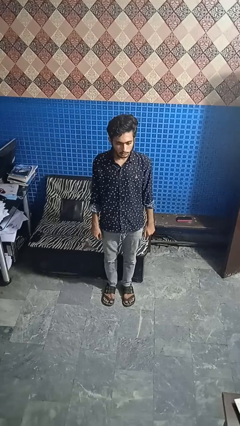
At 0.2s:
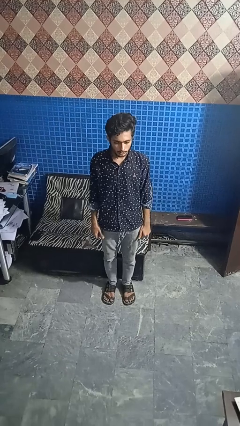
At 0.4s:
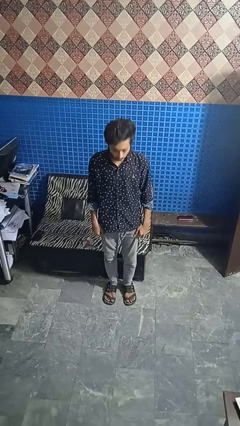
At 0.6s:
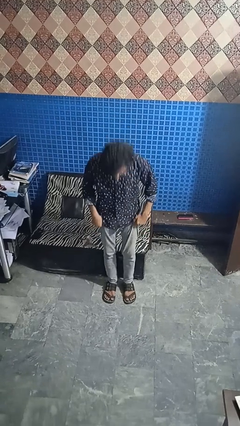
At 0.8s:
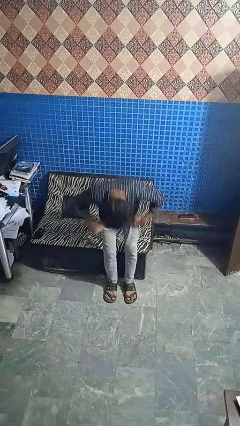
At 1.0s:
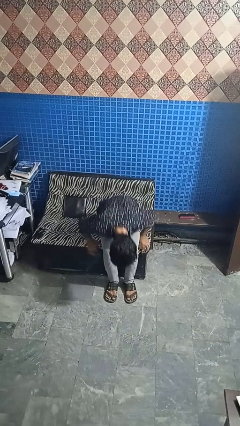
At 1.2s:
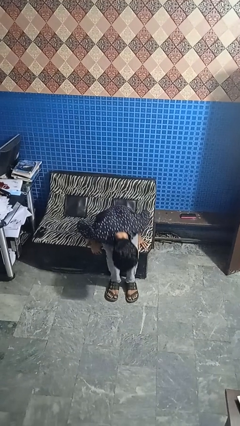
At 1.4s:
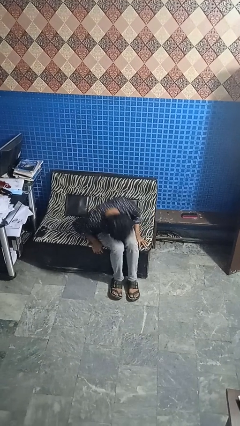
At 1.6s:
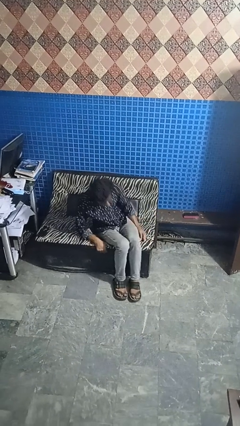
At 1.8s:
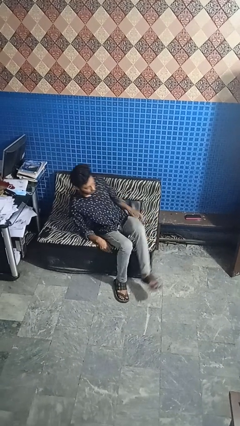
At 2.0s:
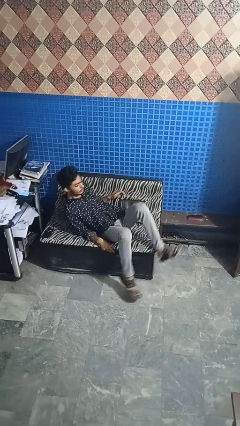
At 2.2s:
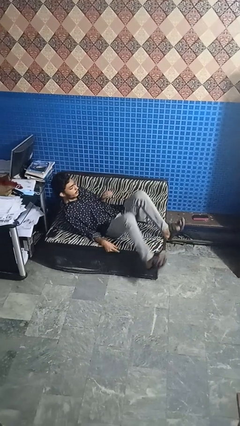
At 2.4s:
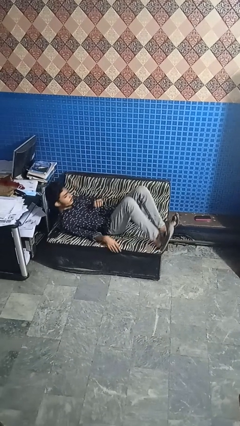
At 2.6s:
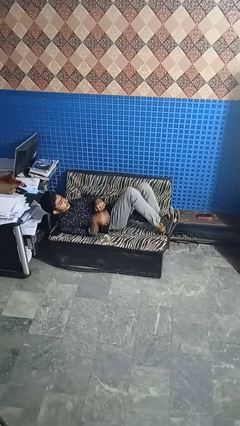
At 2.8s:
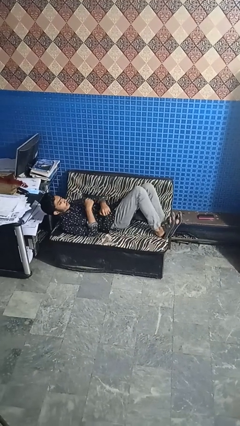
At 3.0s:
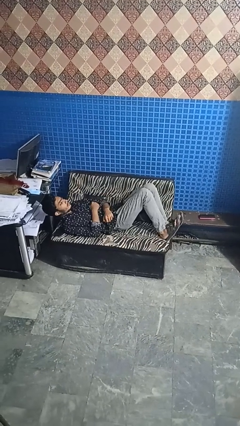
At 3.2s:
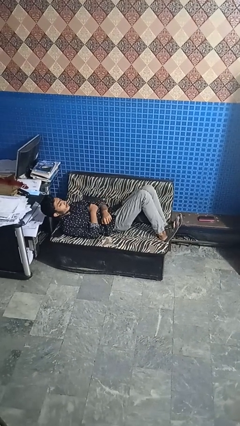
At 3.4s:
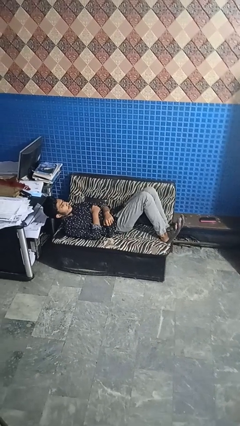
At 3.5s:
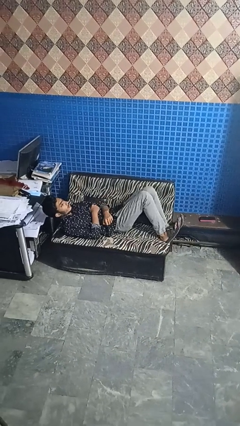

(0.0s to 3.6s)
person lies down on couch

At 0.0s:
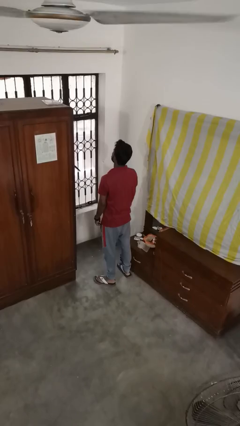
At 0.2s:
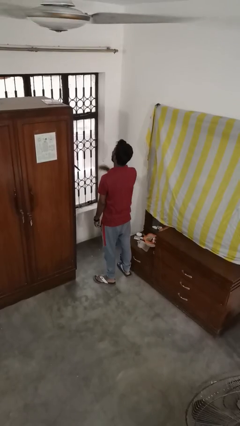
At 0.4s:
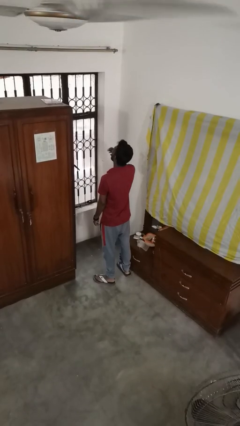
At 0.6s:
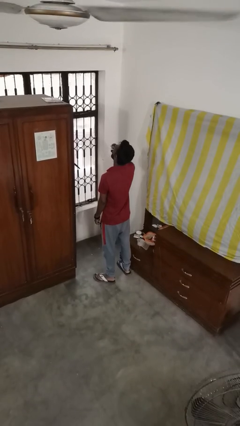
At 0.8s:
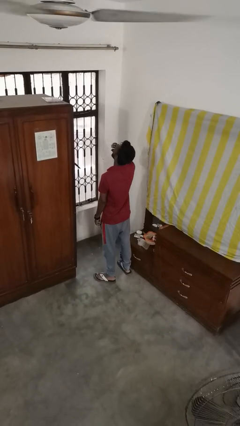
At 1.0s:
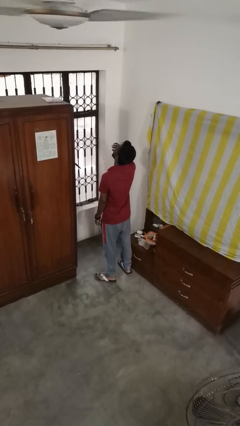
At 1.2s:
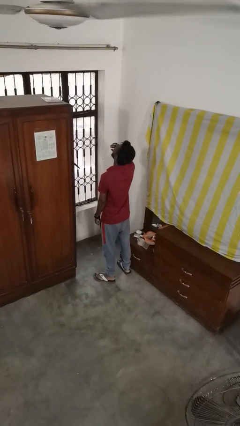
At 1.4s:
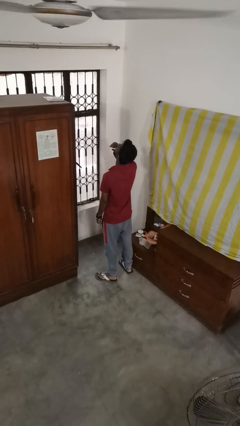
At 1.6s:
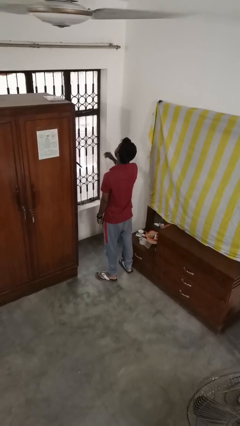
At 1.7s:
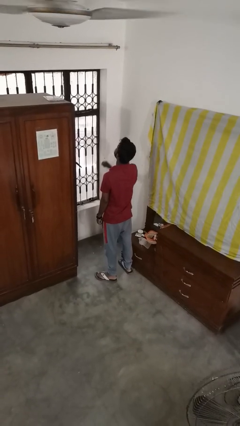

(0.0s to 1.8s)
person yawns

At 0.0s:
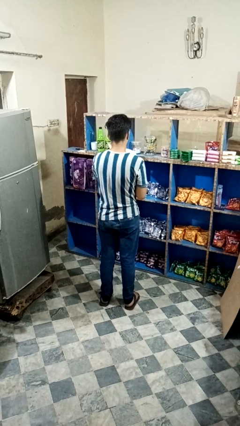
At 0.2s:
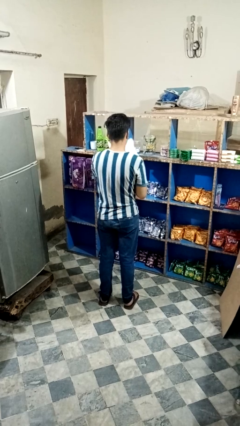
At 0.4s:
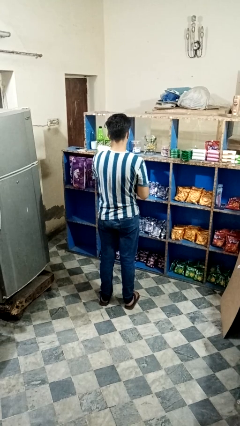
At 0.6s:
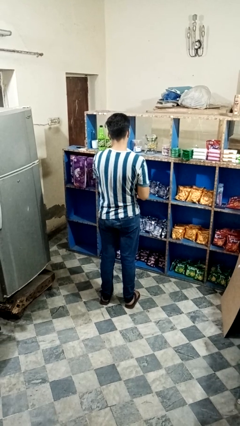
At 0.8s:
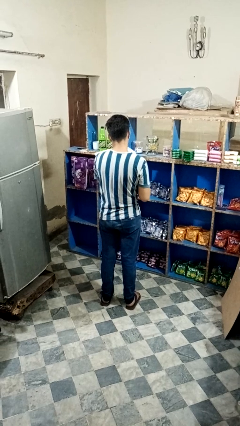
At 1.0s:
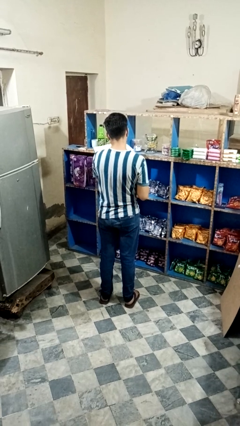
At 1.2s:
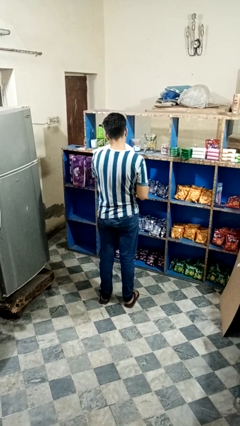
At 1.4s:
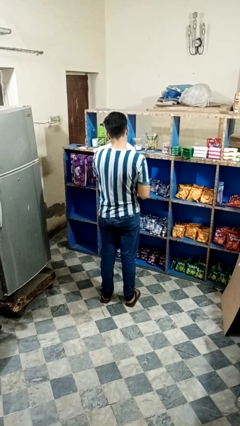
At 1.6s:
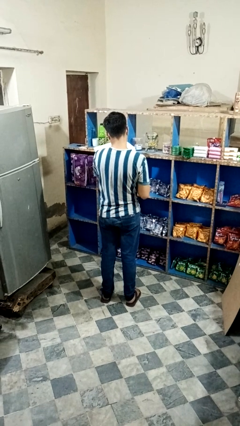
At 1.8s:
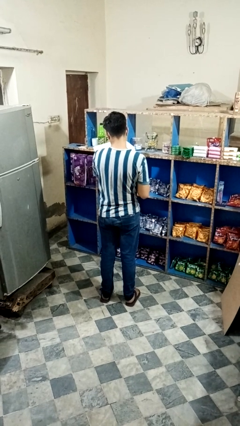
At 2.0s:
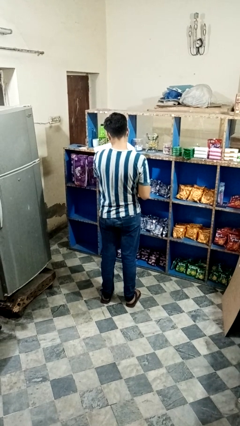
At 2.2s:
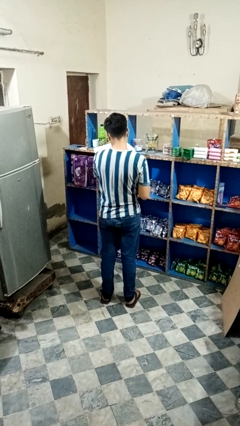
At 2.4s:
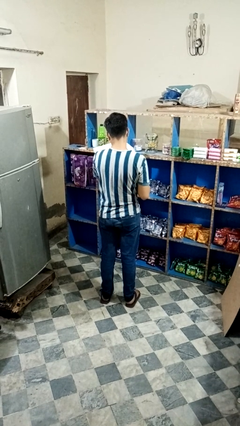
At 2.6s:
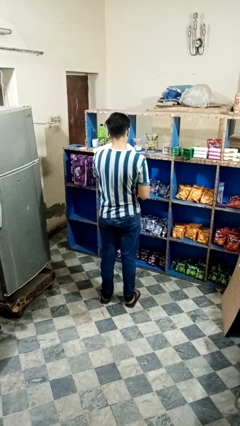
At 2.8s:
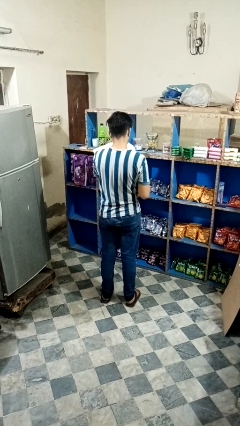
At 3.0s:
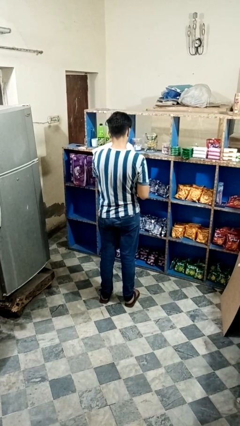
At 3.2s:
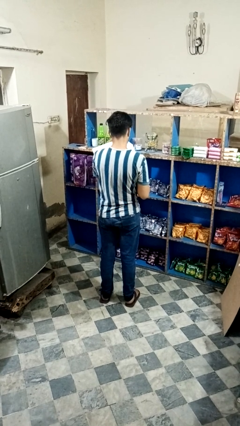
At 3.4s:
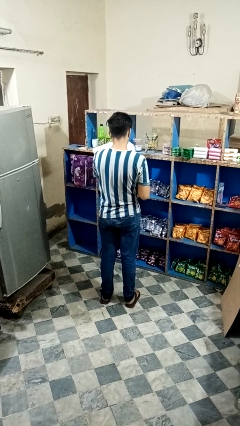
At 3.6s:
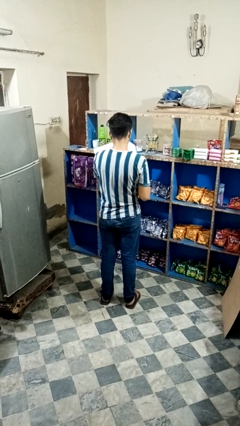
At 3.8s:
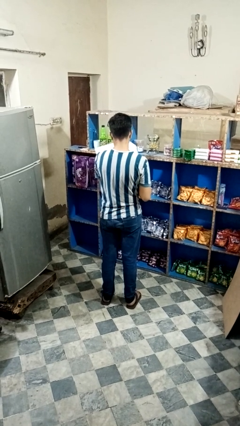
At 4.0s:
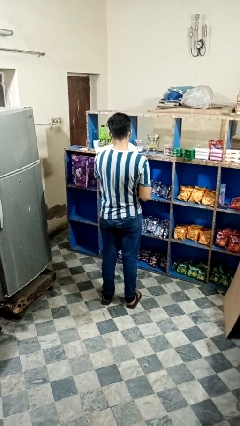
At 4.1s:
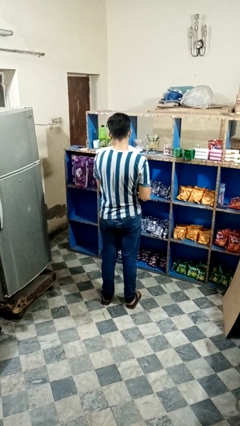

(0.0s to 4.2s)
person reads magazine

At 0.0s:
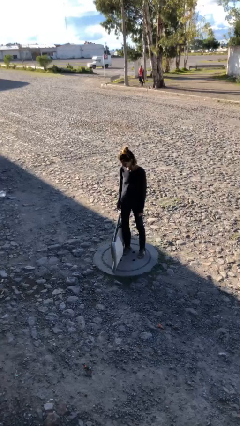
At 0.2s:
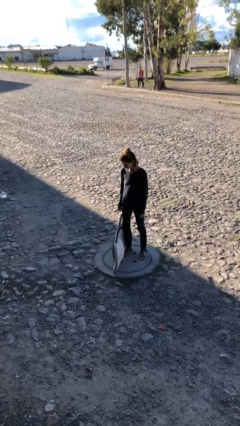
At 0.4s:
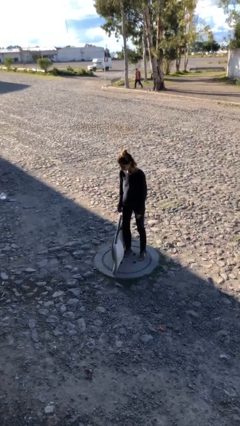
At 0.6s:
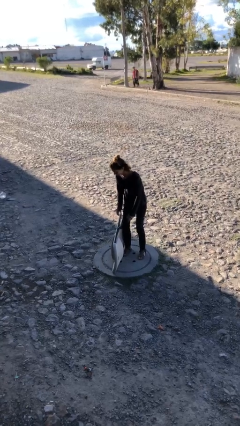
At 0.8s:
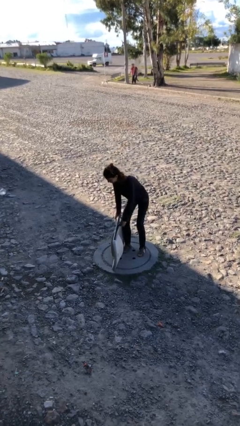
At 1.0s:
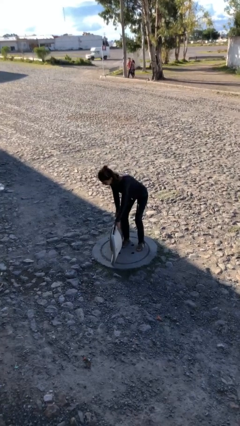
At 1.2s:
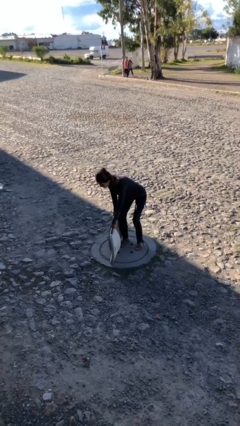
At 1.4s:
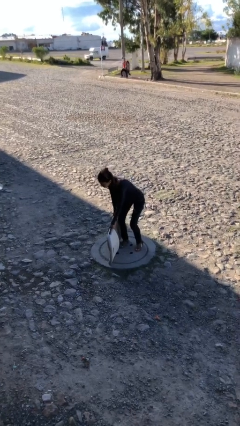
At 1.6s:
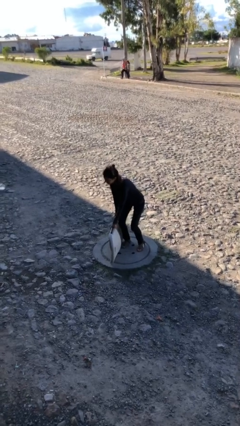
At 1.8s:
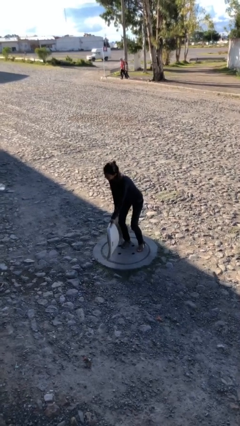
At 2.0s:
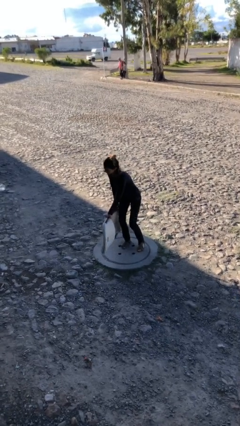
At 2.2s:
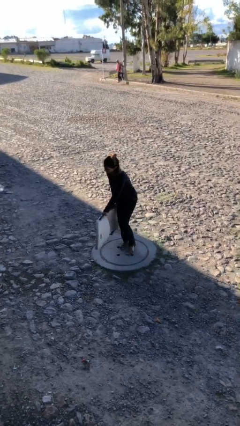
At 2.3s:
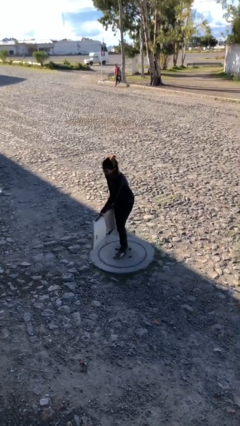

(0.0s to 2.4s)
person picks up object from floor

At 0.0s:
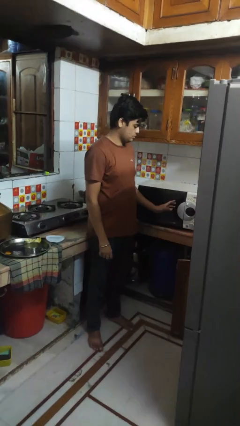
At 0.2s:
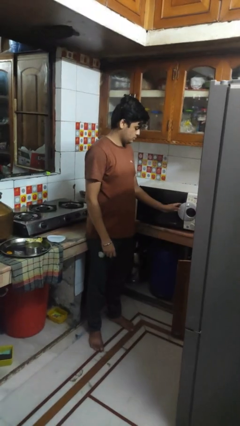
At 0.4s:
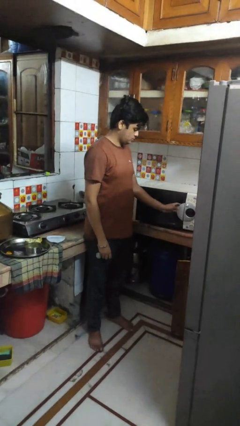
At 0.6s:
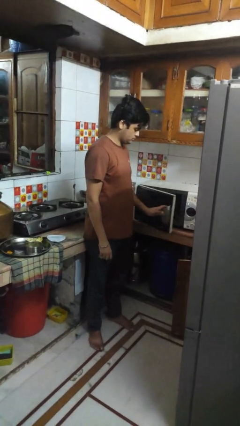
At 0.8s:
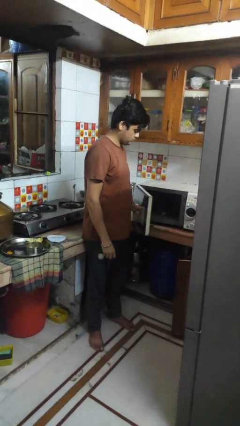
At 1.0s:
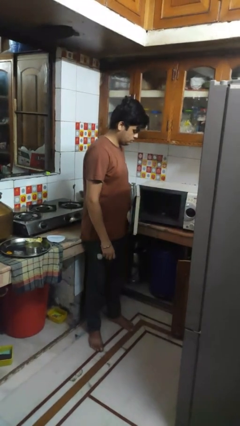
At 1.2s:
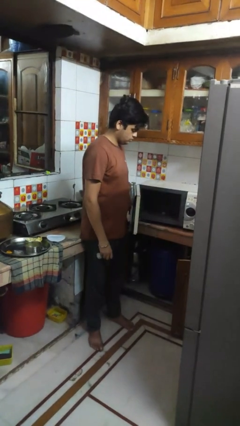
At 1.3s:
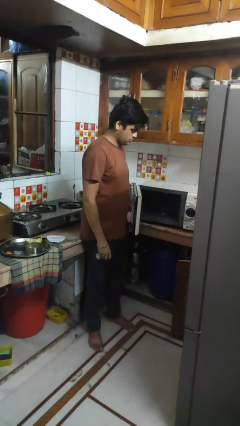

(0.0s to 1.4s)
person opens oven door

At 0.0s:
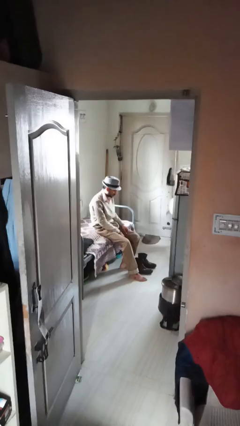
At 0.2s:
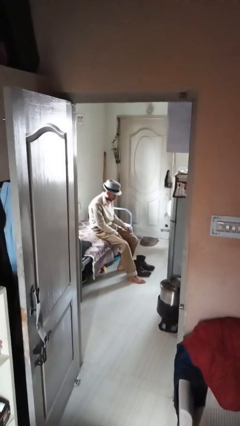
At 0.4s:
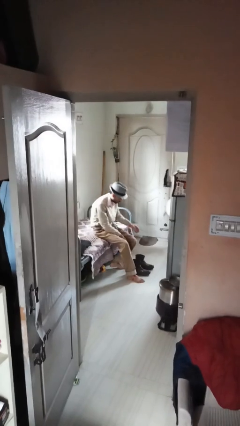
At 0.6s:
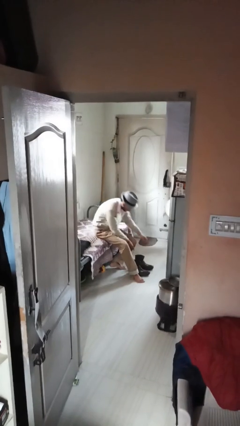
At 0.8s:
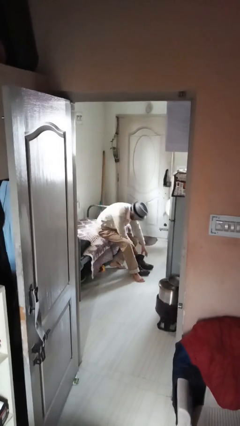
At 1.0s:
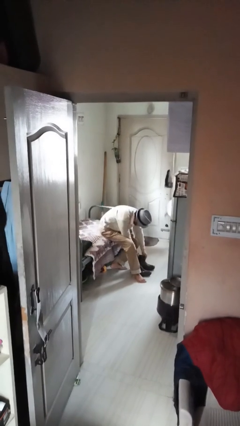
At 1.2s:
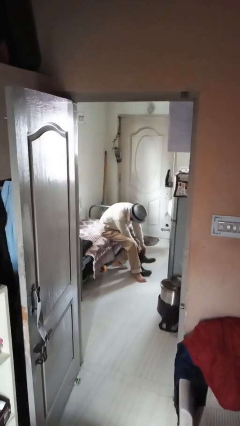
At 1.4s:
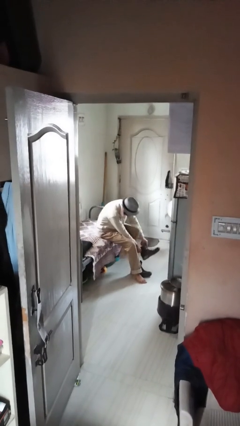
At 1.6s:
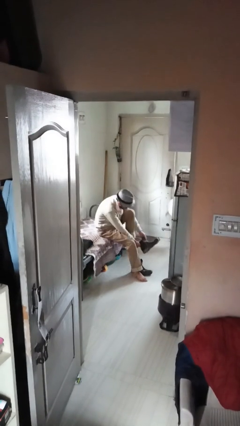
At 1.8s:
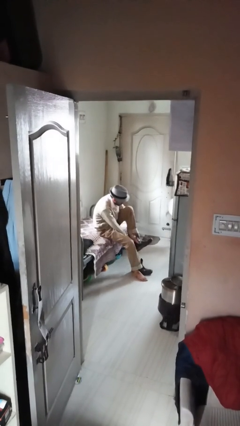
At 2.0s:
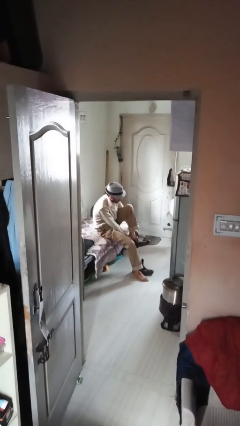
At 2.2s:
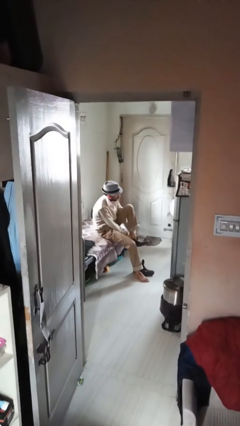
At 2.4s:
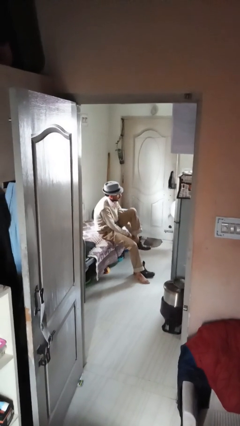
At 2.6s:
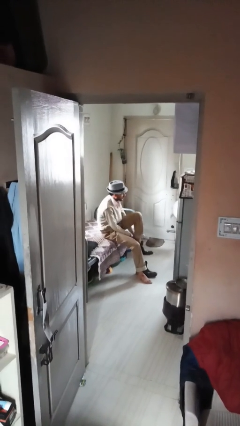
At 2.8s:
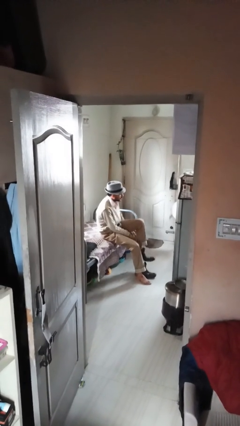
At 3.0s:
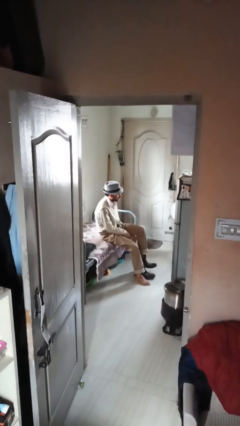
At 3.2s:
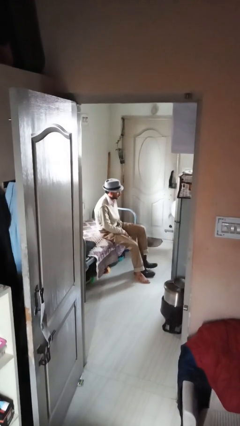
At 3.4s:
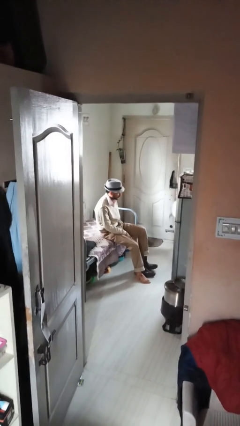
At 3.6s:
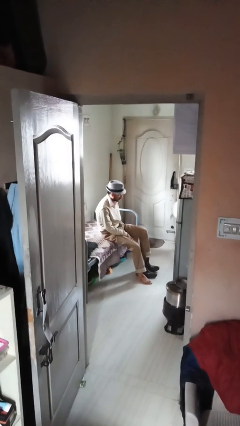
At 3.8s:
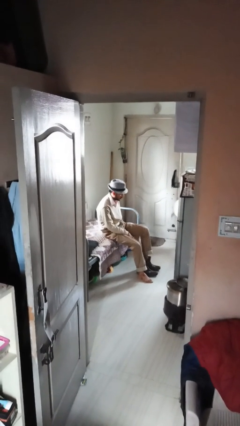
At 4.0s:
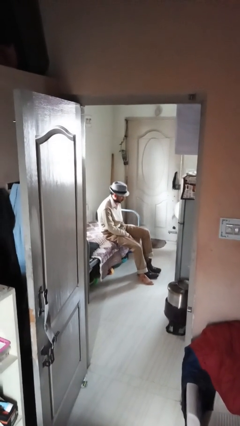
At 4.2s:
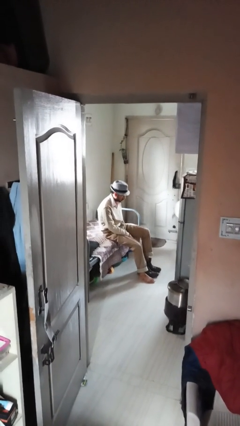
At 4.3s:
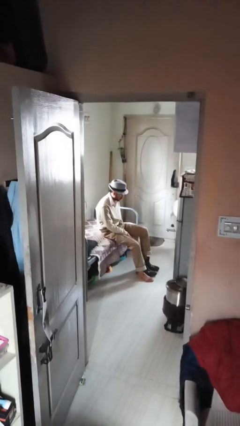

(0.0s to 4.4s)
person puts on boots
